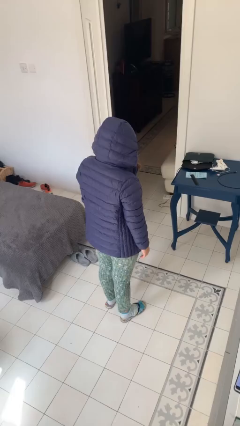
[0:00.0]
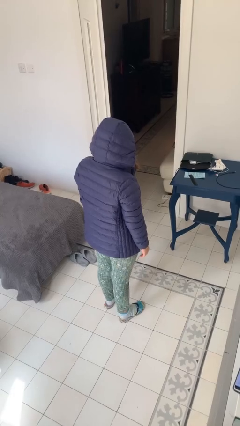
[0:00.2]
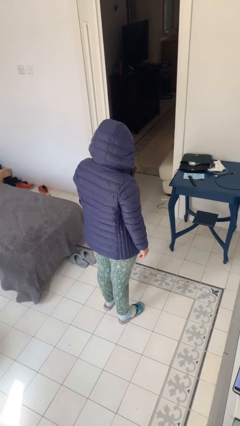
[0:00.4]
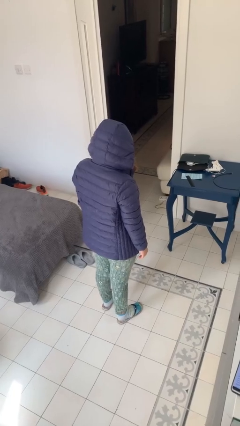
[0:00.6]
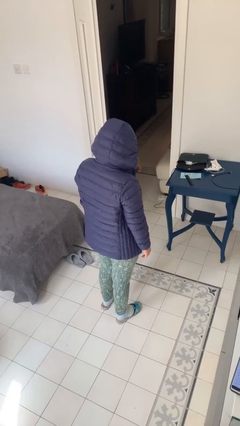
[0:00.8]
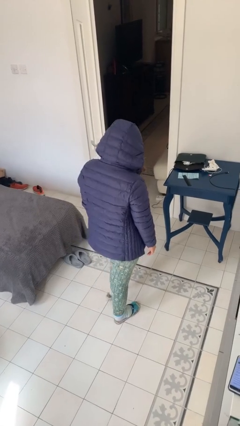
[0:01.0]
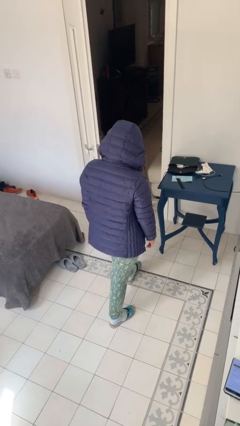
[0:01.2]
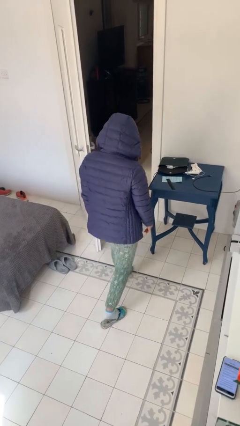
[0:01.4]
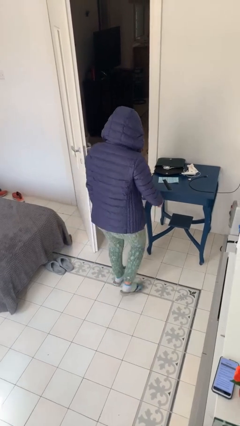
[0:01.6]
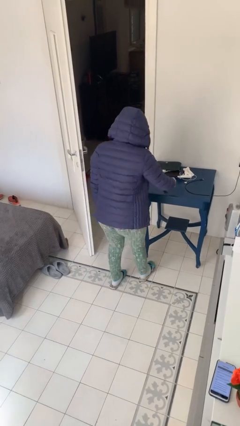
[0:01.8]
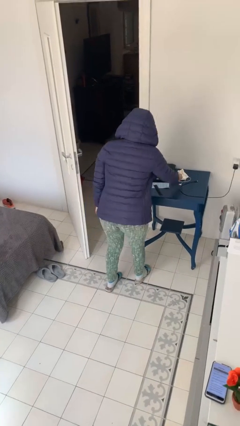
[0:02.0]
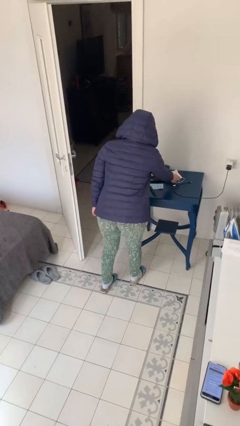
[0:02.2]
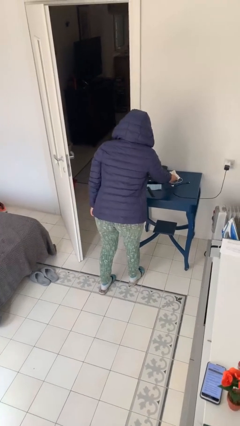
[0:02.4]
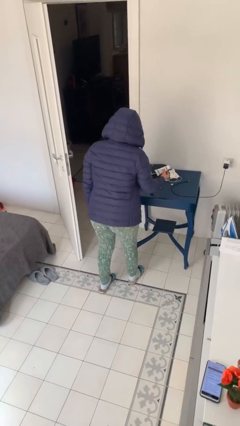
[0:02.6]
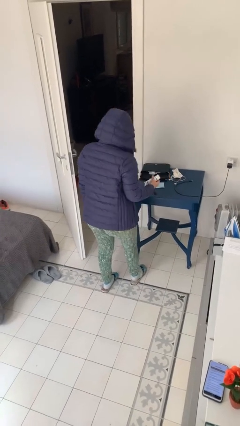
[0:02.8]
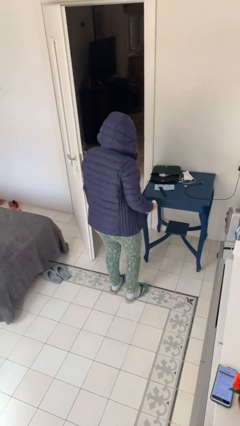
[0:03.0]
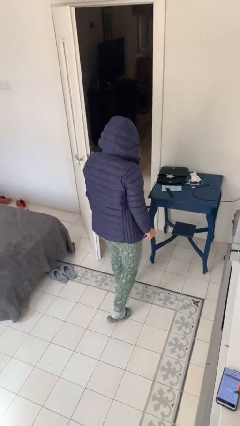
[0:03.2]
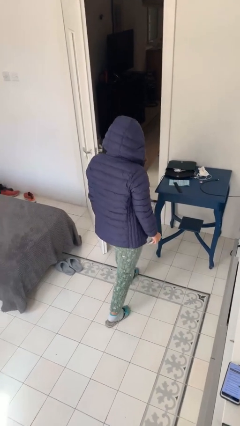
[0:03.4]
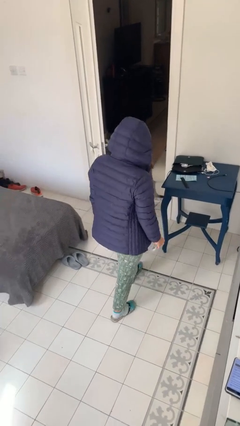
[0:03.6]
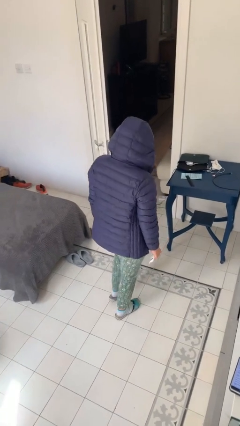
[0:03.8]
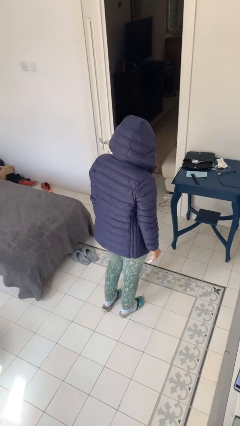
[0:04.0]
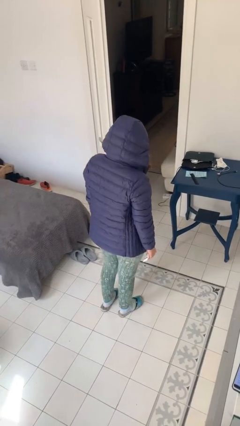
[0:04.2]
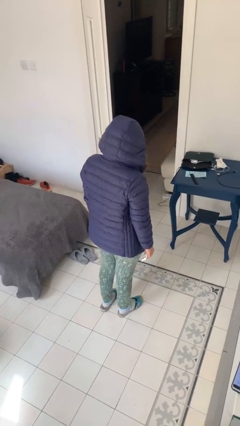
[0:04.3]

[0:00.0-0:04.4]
person picks up object from table

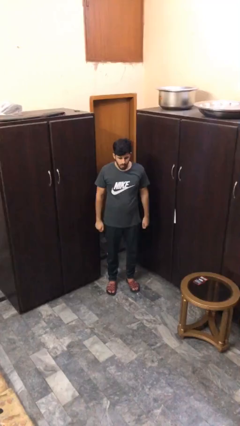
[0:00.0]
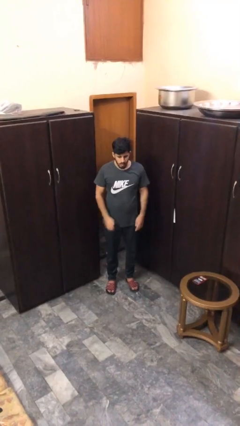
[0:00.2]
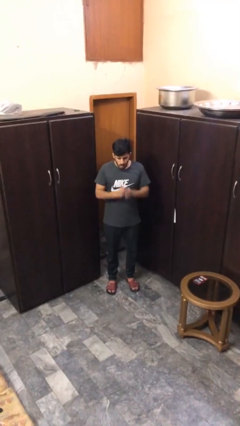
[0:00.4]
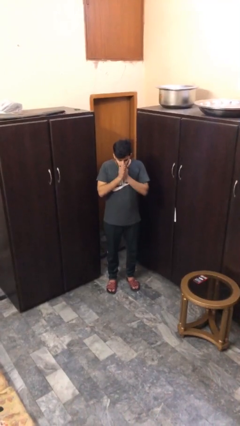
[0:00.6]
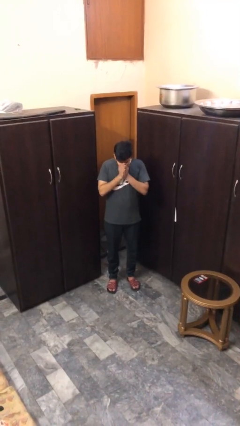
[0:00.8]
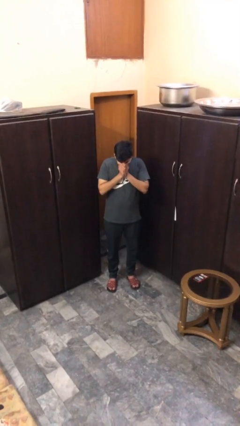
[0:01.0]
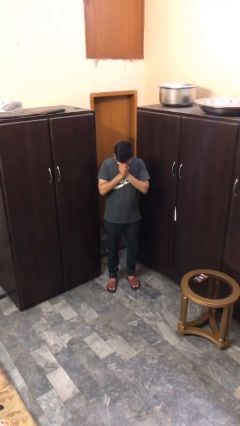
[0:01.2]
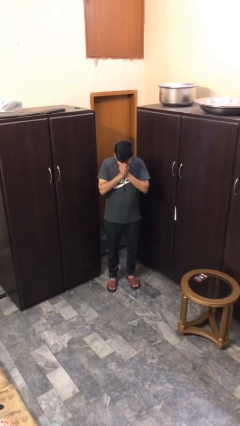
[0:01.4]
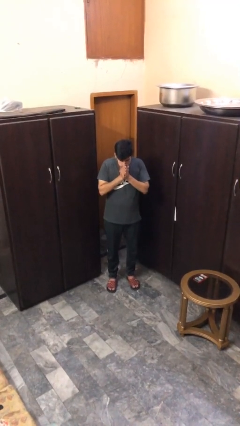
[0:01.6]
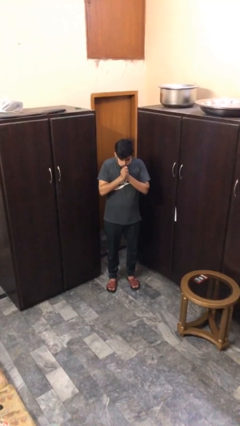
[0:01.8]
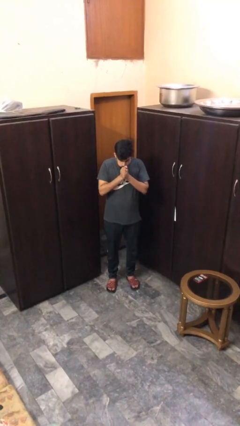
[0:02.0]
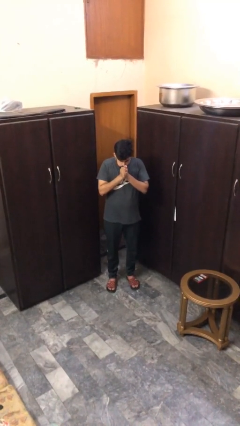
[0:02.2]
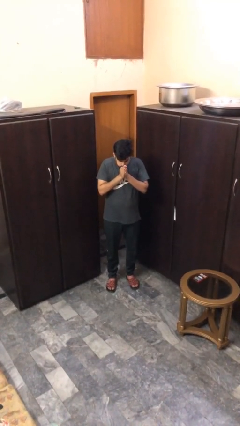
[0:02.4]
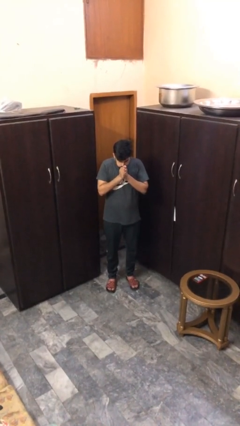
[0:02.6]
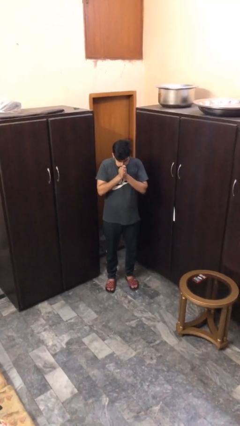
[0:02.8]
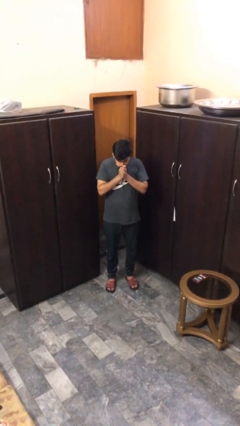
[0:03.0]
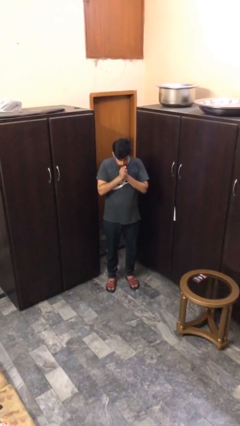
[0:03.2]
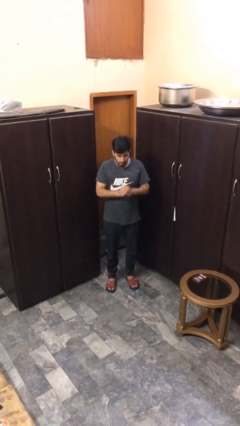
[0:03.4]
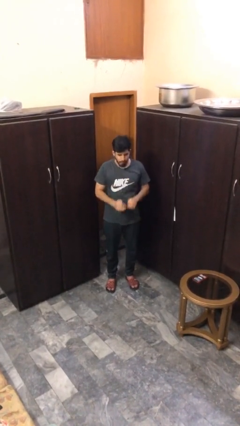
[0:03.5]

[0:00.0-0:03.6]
person blows into hands

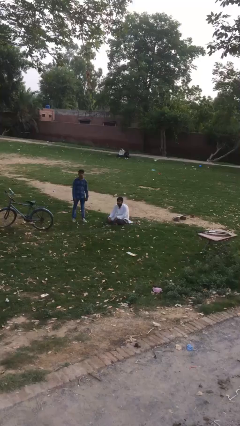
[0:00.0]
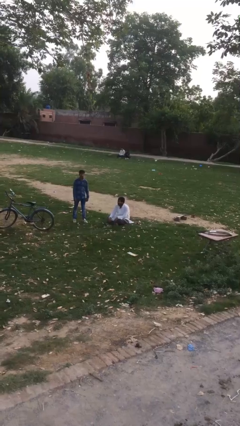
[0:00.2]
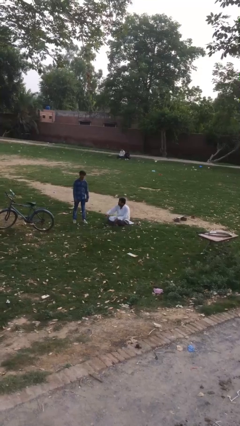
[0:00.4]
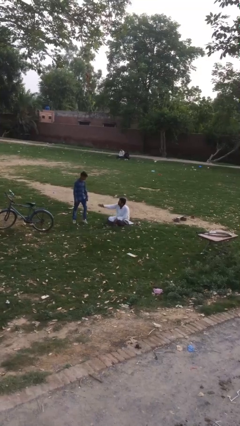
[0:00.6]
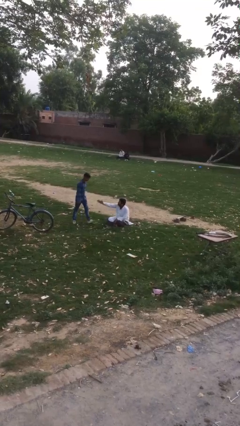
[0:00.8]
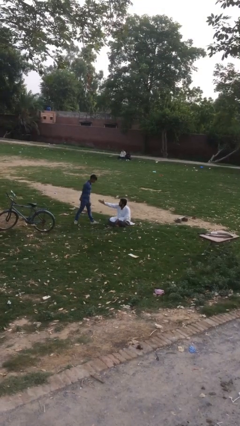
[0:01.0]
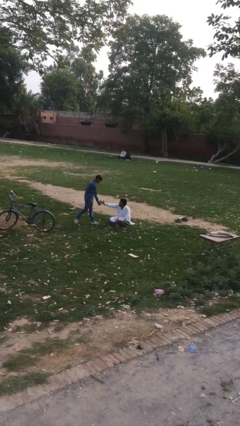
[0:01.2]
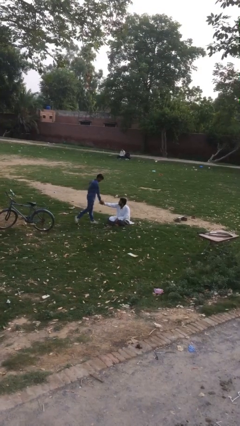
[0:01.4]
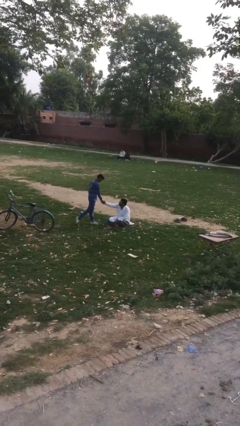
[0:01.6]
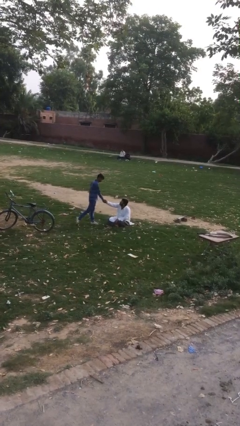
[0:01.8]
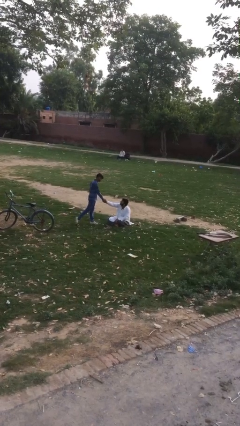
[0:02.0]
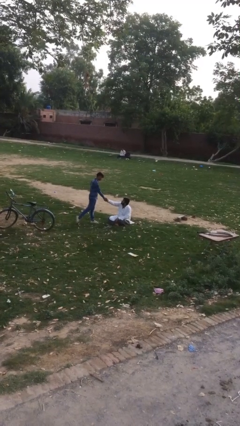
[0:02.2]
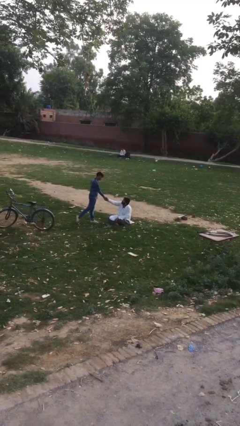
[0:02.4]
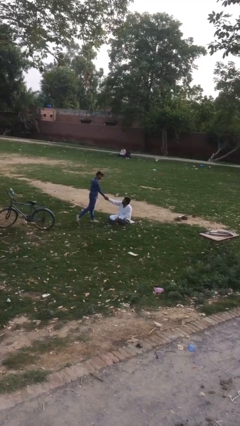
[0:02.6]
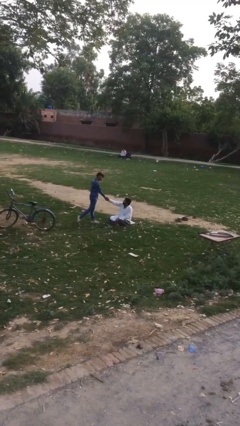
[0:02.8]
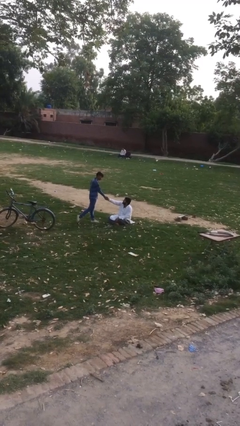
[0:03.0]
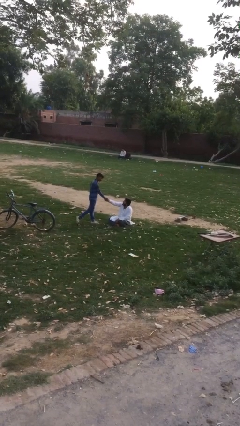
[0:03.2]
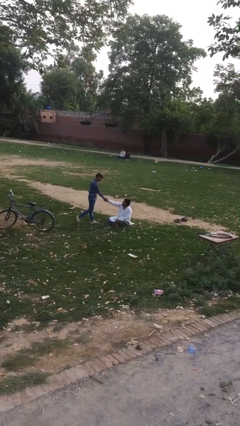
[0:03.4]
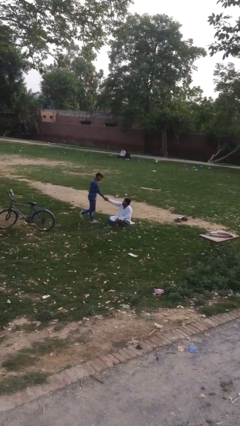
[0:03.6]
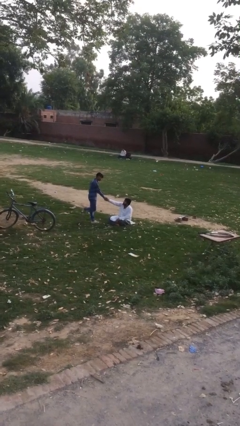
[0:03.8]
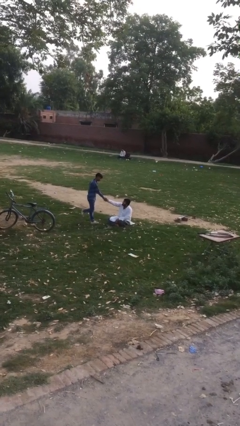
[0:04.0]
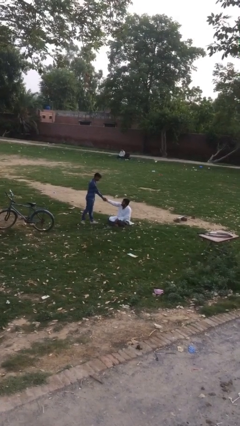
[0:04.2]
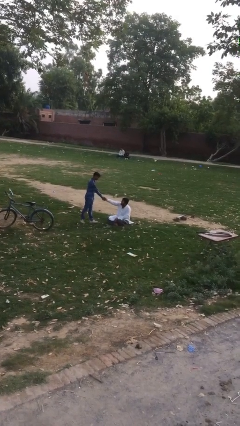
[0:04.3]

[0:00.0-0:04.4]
person shakes hand

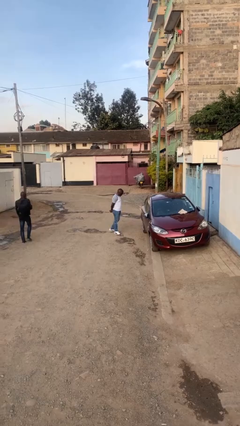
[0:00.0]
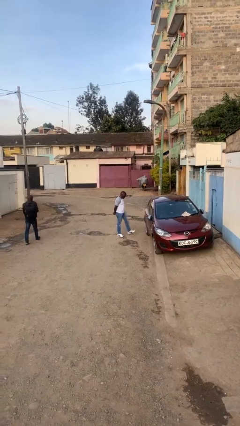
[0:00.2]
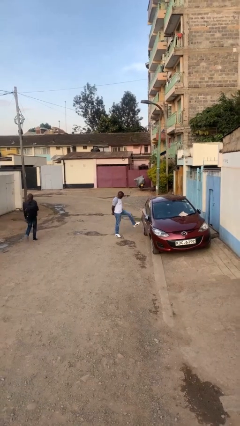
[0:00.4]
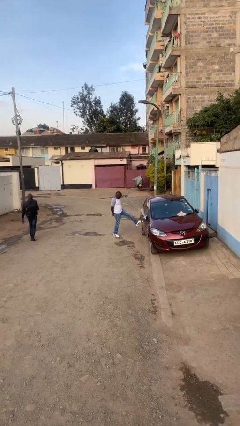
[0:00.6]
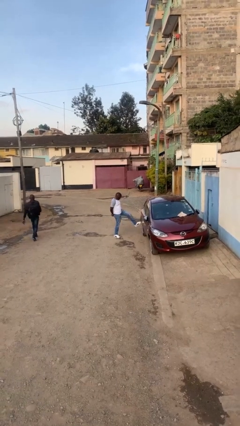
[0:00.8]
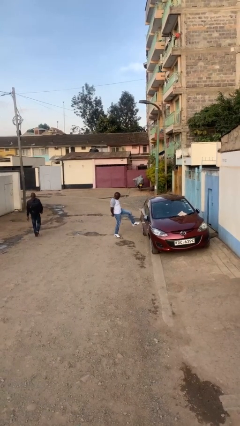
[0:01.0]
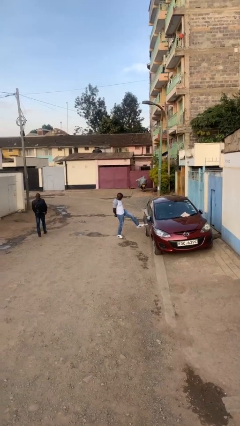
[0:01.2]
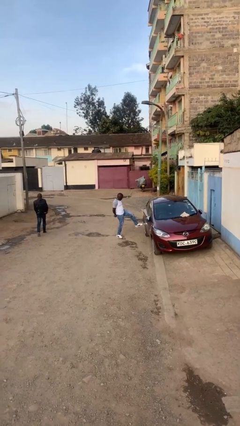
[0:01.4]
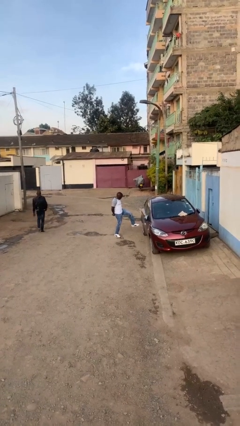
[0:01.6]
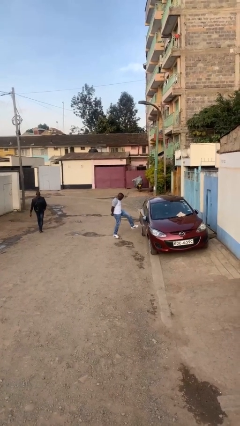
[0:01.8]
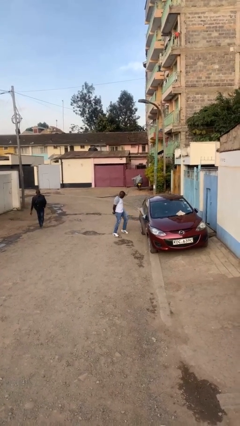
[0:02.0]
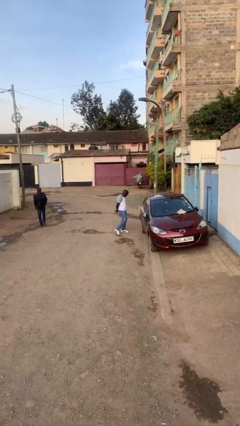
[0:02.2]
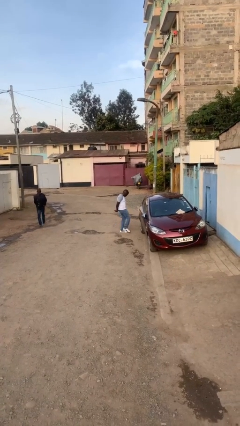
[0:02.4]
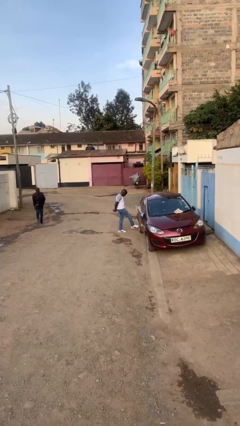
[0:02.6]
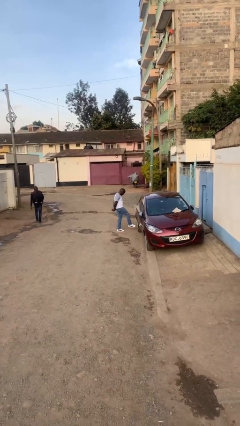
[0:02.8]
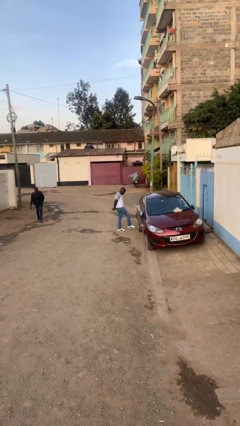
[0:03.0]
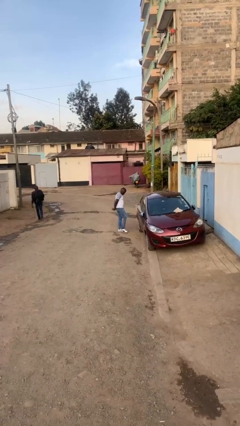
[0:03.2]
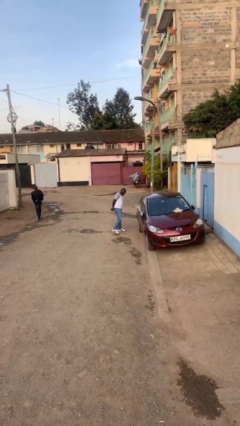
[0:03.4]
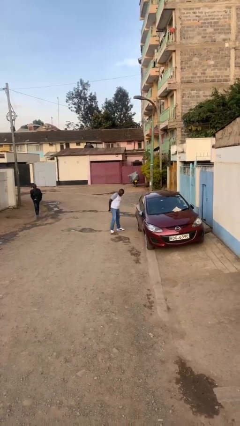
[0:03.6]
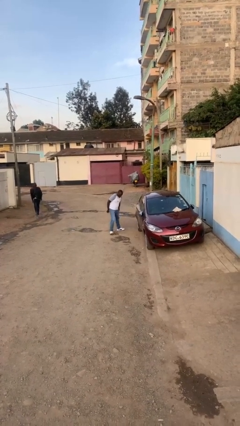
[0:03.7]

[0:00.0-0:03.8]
person kicks car tires

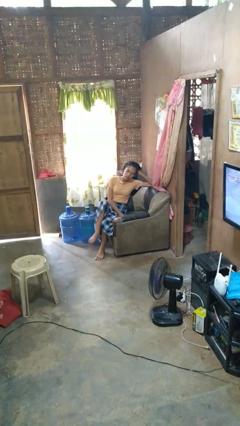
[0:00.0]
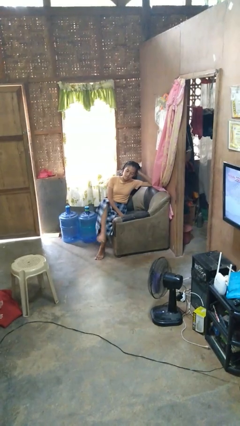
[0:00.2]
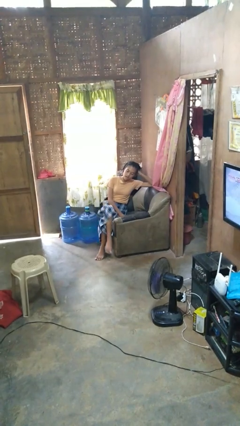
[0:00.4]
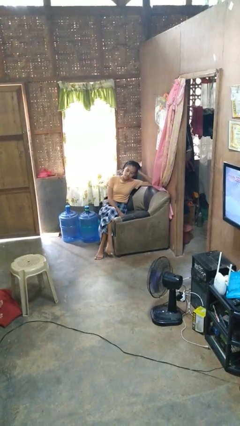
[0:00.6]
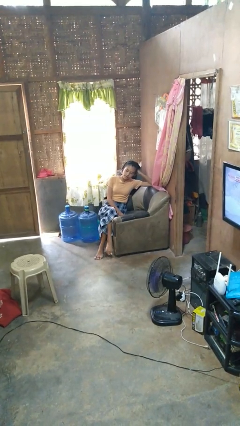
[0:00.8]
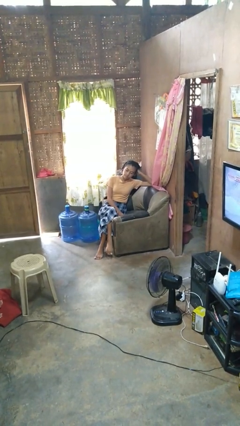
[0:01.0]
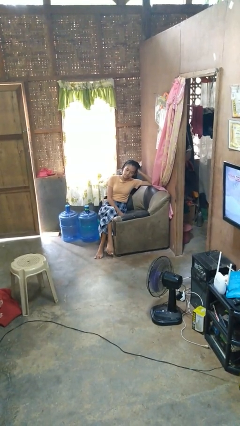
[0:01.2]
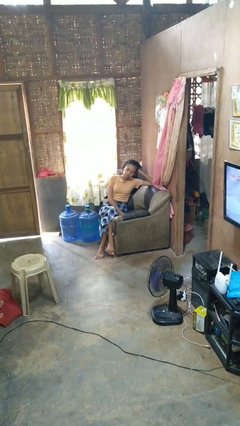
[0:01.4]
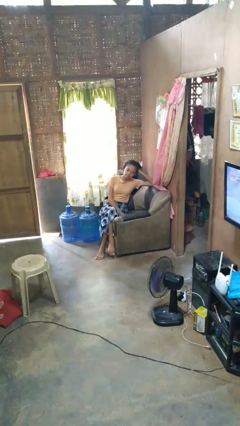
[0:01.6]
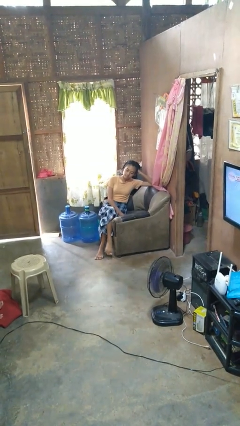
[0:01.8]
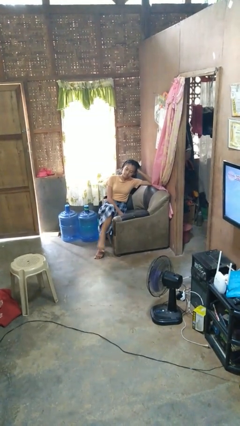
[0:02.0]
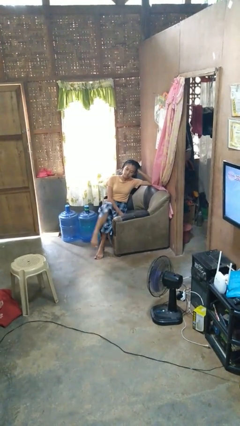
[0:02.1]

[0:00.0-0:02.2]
person crosses legs
